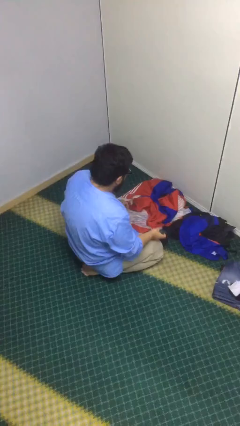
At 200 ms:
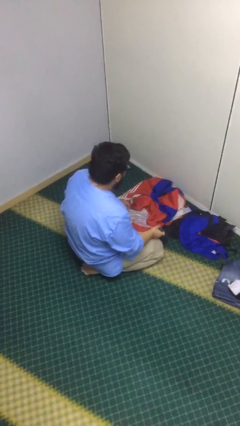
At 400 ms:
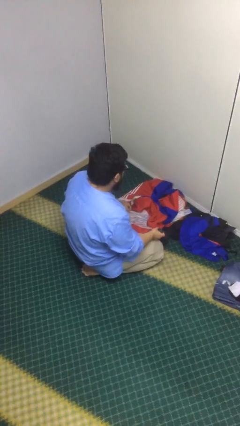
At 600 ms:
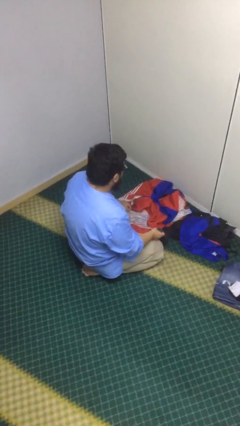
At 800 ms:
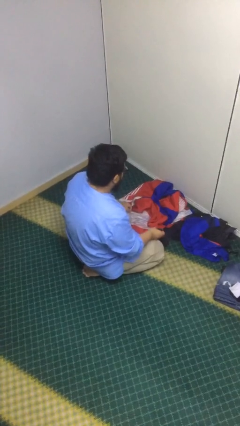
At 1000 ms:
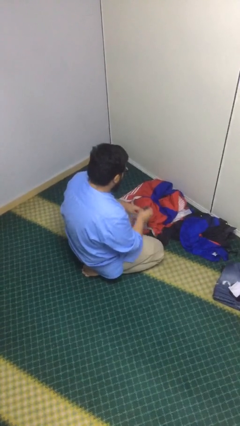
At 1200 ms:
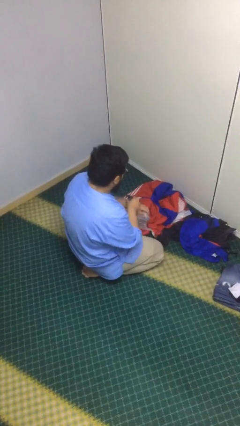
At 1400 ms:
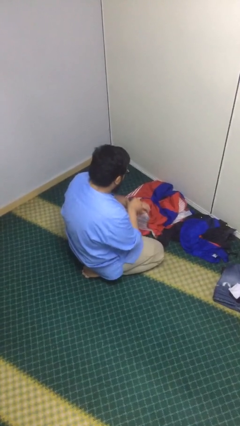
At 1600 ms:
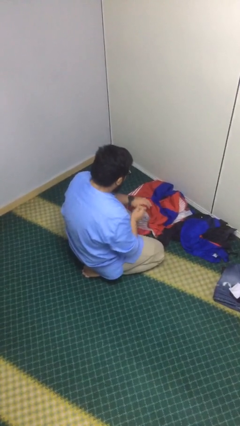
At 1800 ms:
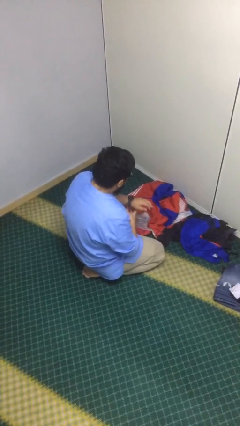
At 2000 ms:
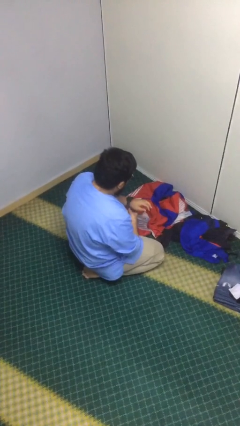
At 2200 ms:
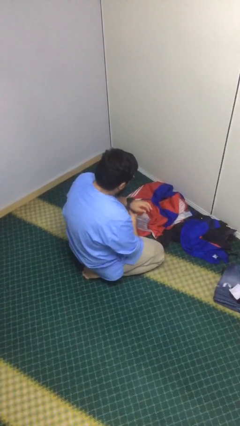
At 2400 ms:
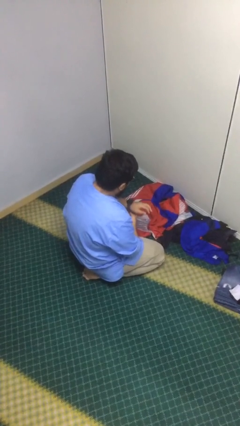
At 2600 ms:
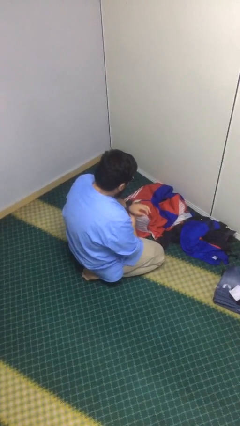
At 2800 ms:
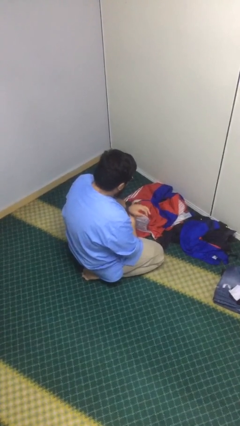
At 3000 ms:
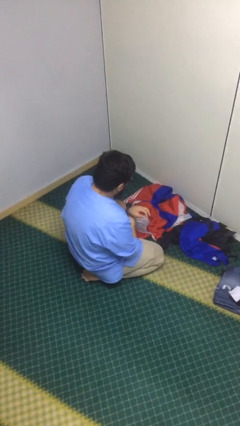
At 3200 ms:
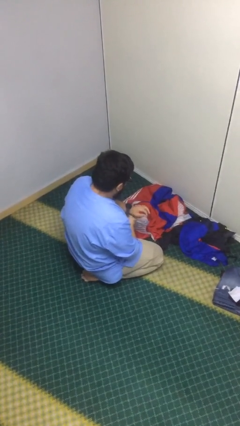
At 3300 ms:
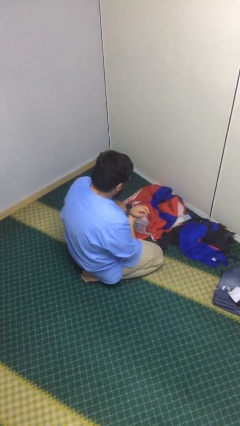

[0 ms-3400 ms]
person puts on wristwatch

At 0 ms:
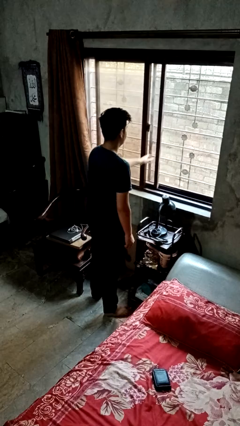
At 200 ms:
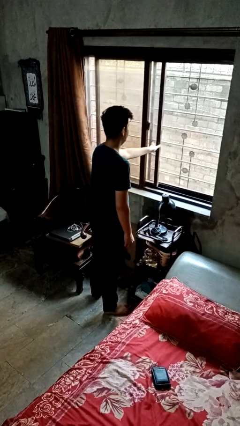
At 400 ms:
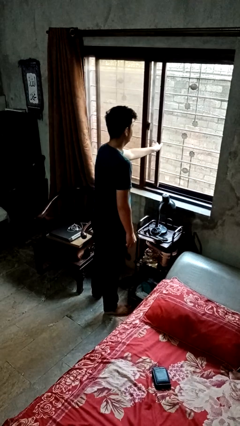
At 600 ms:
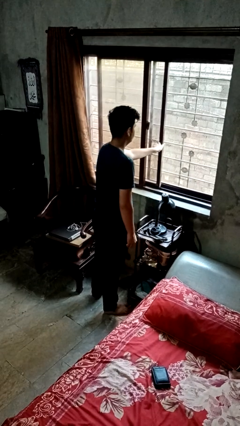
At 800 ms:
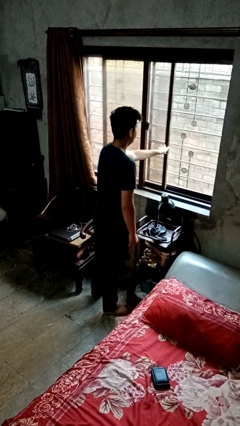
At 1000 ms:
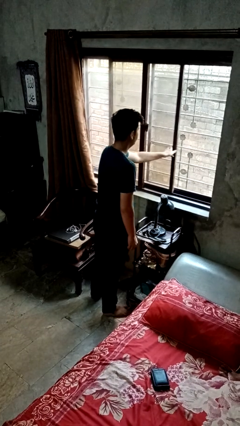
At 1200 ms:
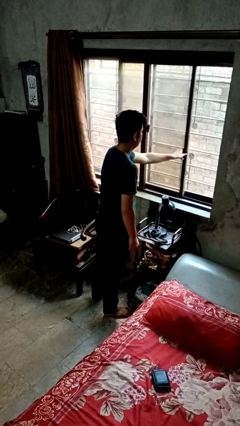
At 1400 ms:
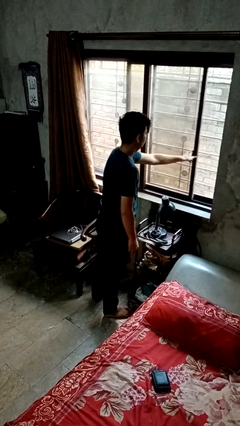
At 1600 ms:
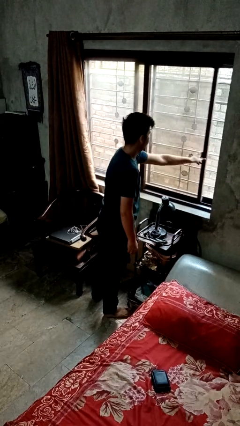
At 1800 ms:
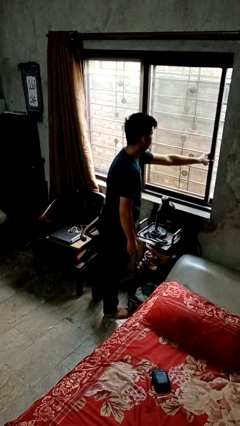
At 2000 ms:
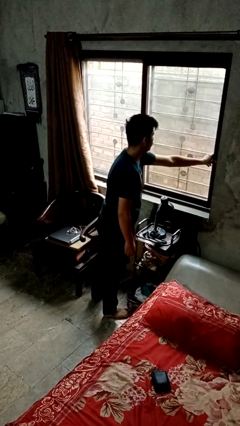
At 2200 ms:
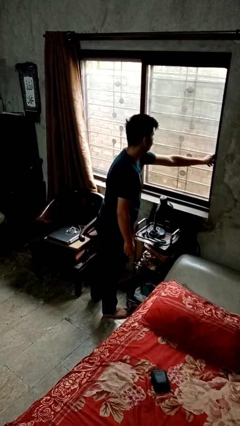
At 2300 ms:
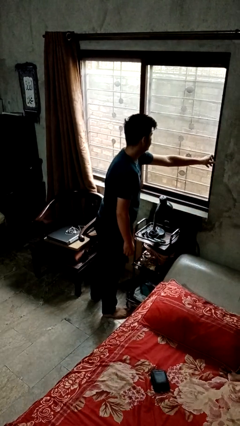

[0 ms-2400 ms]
person closes home window

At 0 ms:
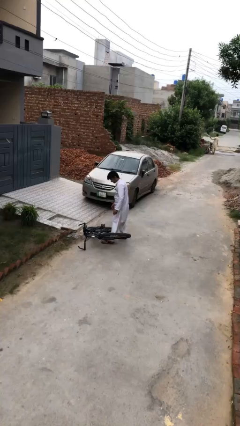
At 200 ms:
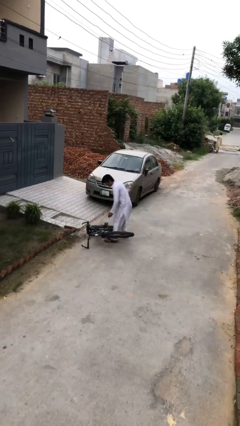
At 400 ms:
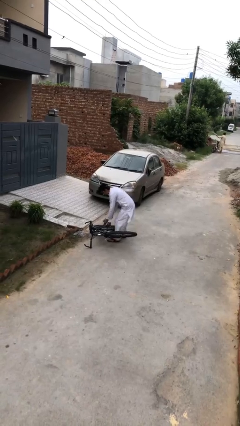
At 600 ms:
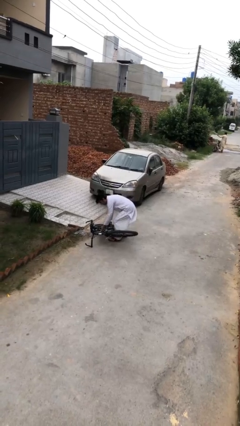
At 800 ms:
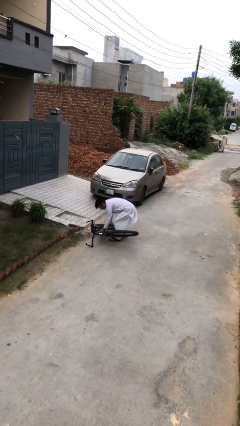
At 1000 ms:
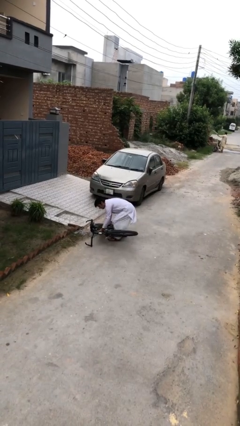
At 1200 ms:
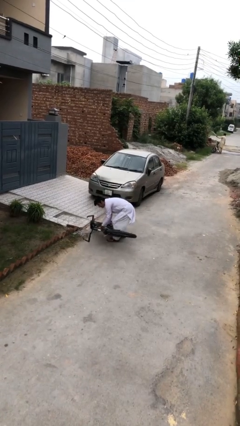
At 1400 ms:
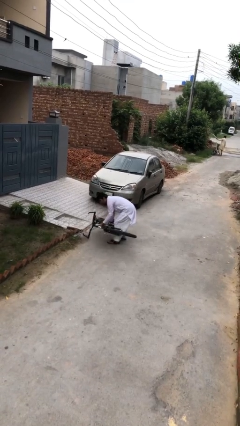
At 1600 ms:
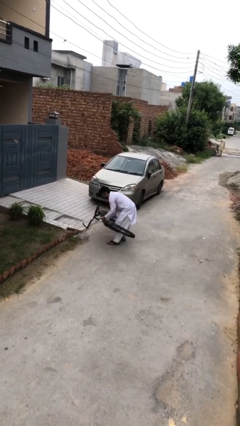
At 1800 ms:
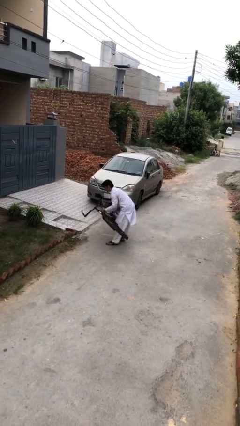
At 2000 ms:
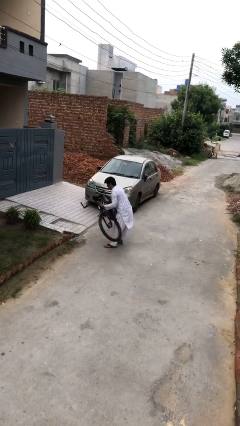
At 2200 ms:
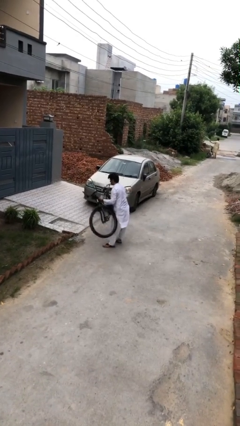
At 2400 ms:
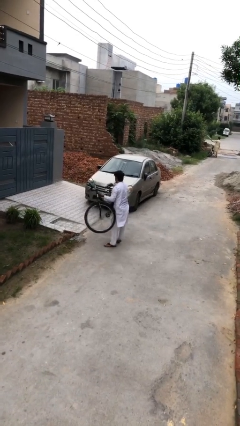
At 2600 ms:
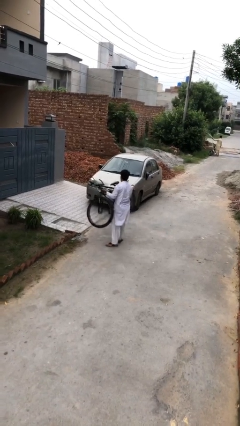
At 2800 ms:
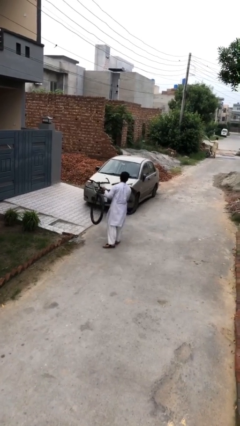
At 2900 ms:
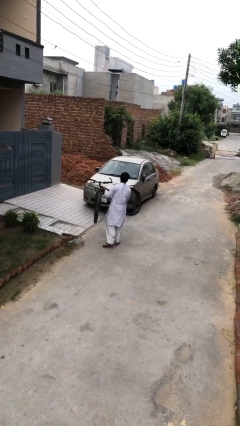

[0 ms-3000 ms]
person picks up object from floor

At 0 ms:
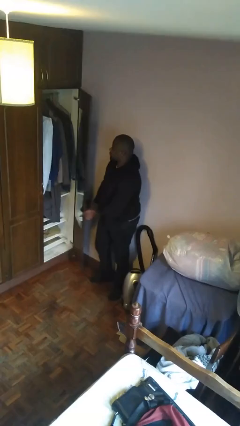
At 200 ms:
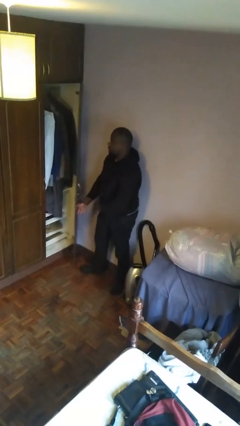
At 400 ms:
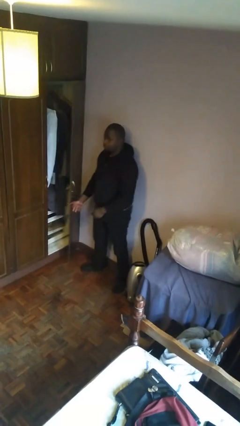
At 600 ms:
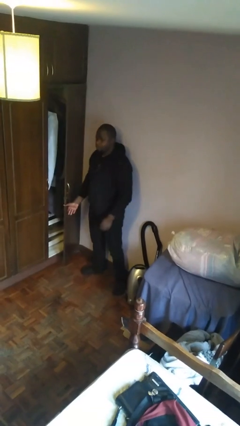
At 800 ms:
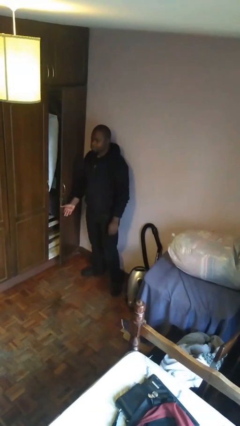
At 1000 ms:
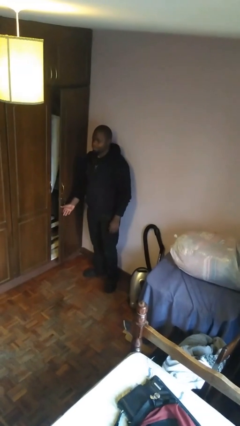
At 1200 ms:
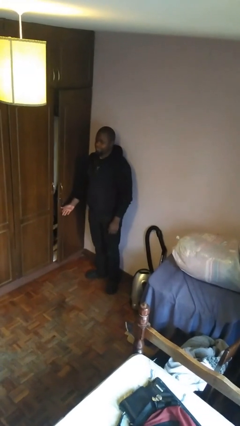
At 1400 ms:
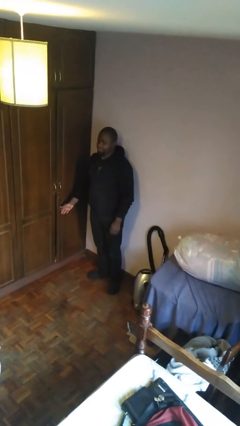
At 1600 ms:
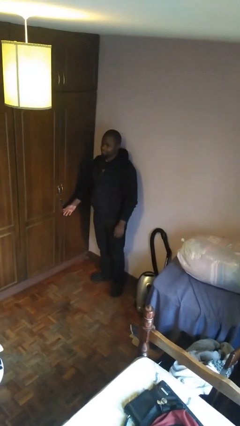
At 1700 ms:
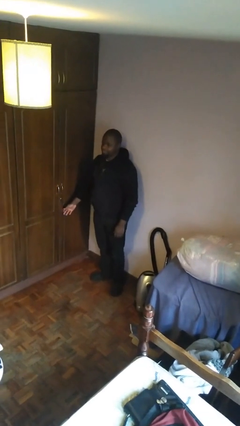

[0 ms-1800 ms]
person closes closet door

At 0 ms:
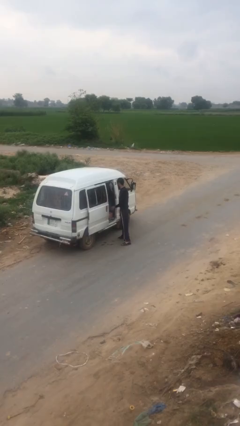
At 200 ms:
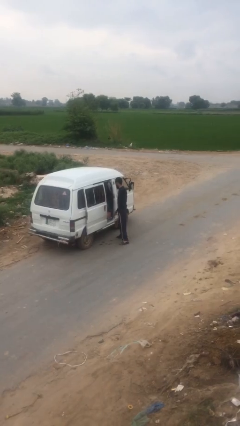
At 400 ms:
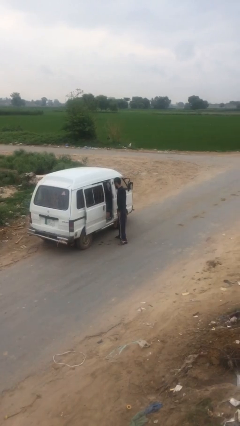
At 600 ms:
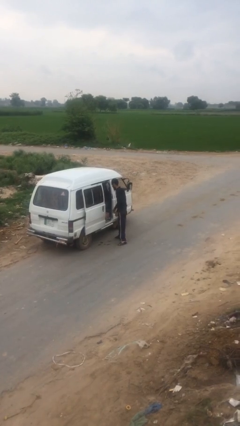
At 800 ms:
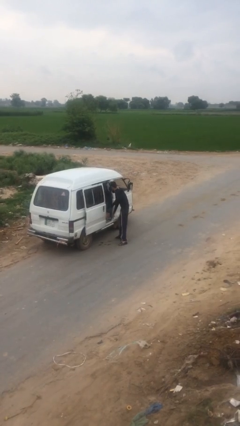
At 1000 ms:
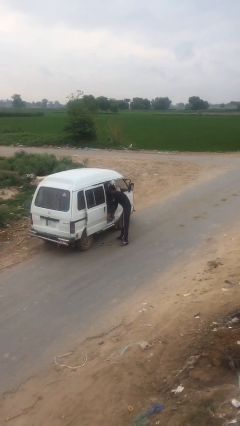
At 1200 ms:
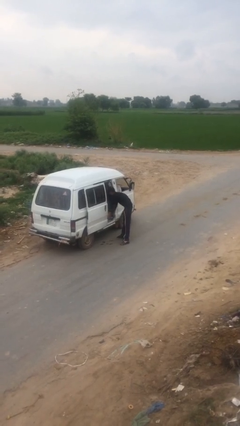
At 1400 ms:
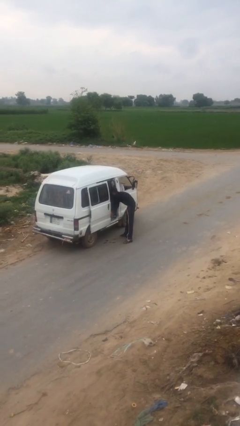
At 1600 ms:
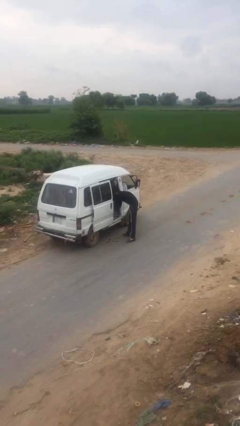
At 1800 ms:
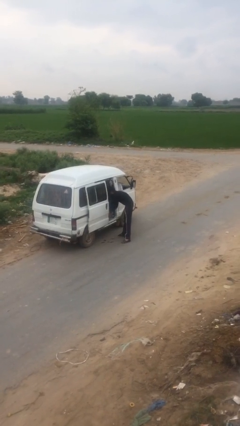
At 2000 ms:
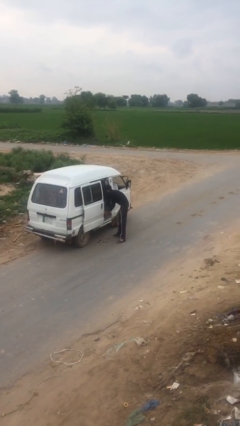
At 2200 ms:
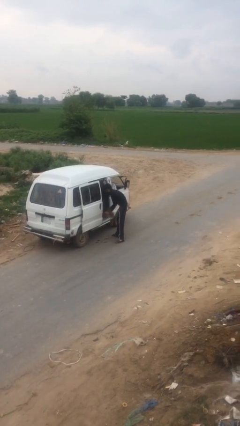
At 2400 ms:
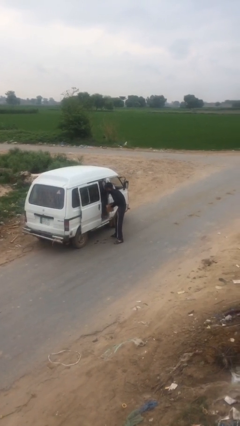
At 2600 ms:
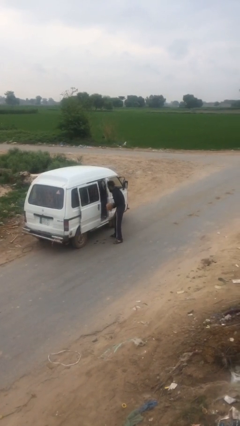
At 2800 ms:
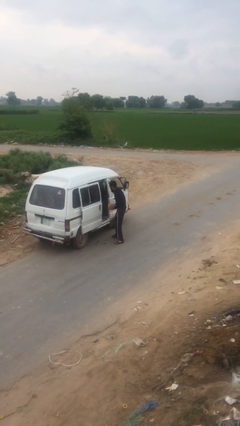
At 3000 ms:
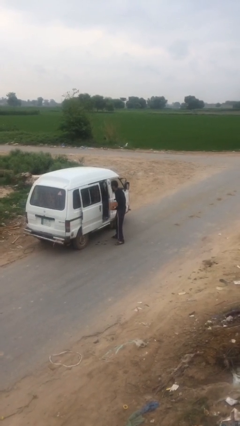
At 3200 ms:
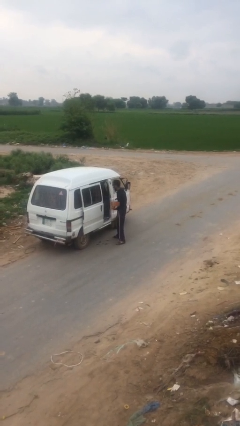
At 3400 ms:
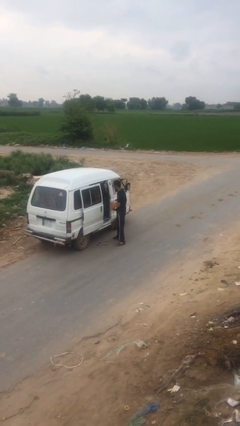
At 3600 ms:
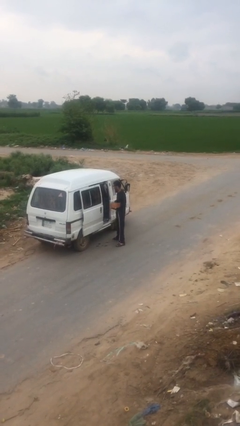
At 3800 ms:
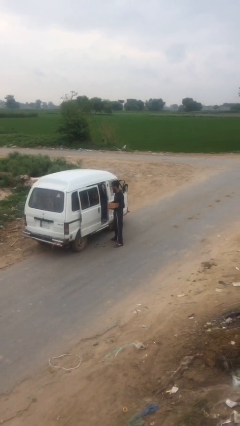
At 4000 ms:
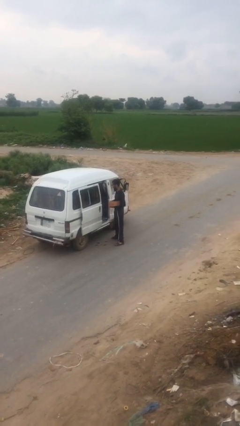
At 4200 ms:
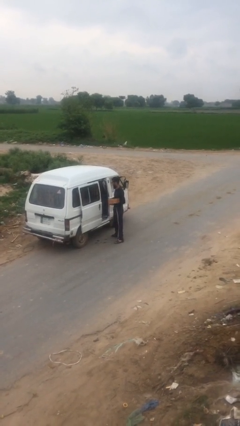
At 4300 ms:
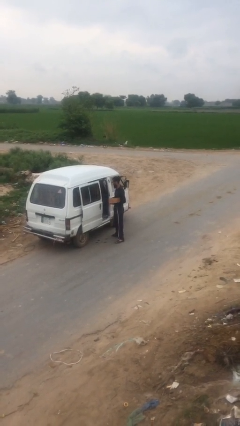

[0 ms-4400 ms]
person unloads car

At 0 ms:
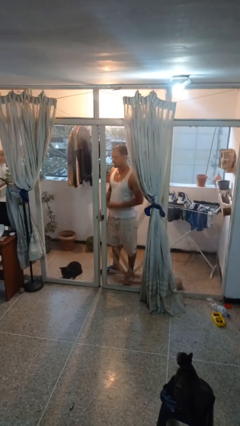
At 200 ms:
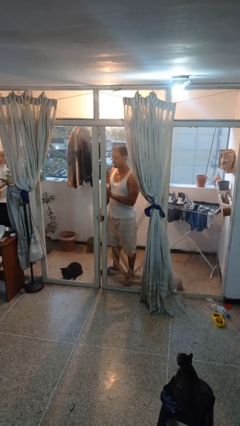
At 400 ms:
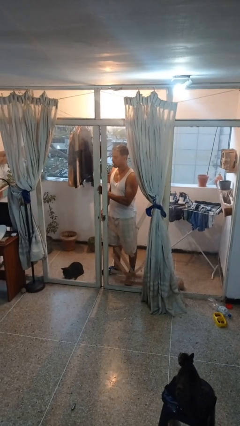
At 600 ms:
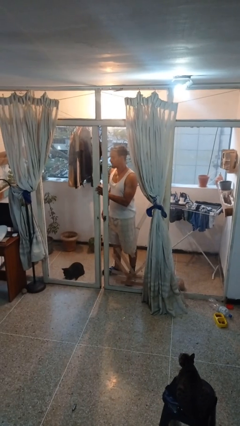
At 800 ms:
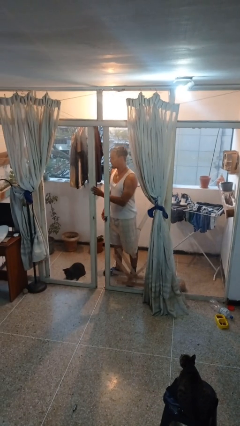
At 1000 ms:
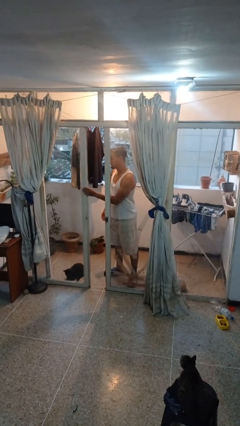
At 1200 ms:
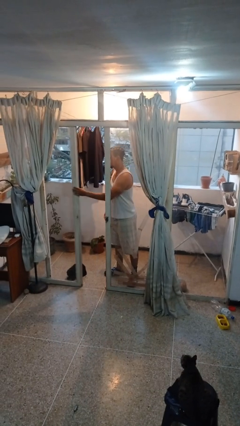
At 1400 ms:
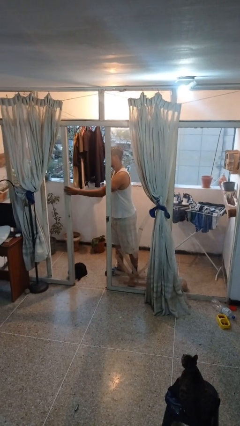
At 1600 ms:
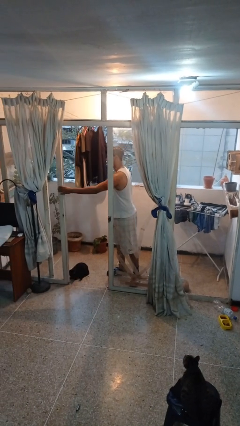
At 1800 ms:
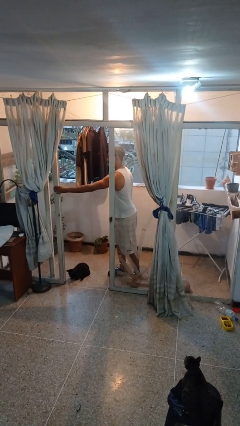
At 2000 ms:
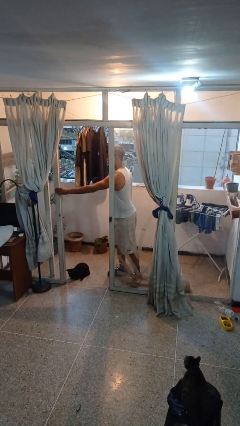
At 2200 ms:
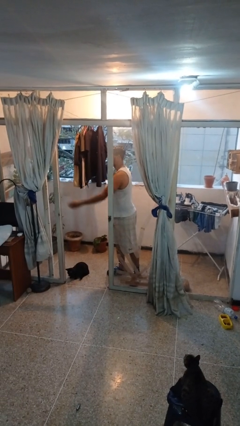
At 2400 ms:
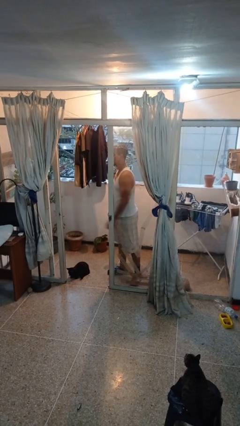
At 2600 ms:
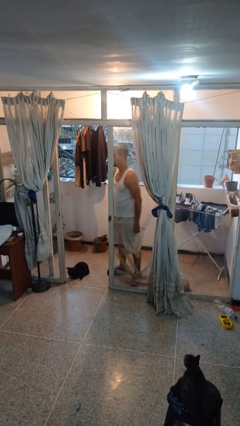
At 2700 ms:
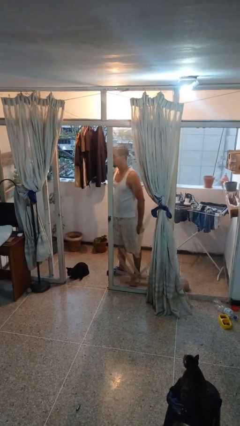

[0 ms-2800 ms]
person opens sliding door
